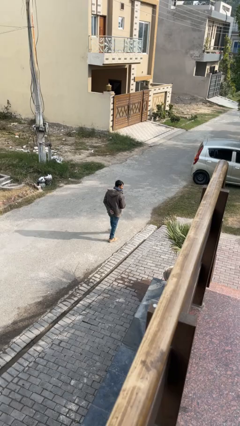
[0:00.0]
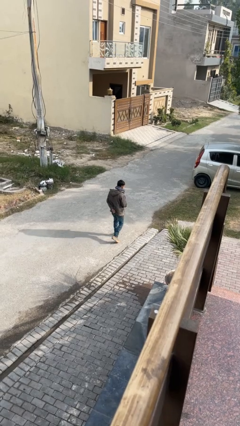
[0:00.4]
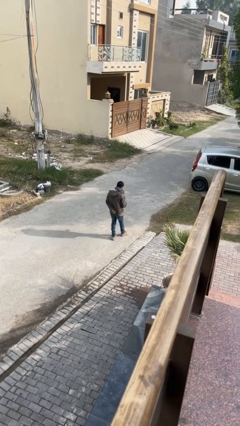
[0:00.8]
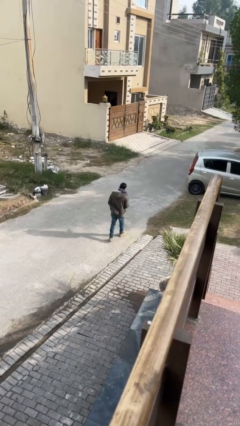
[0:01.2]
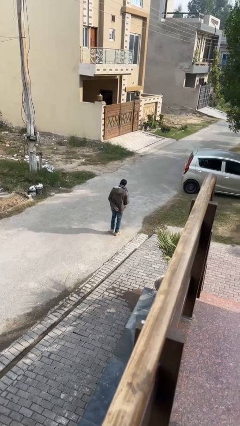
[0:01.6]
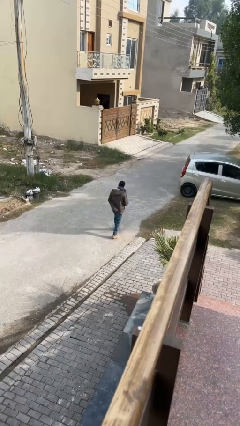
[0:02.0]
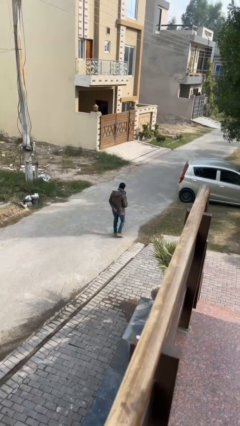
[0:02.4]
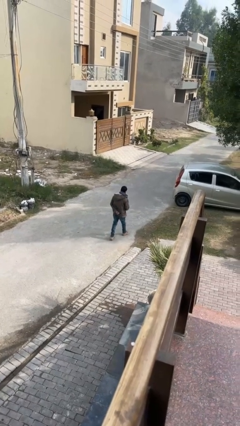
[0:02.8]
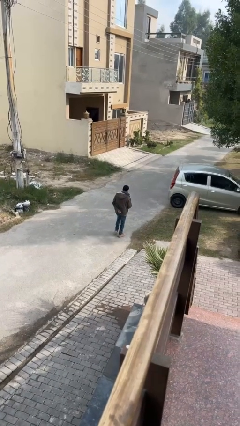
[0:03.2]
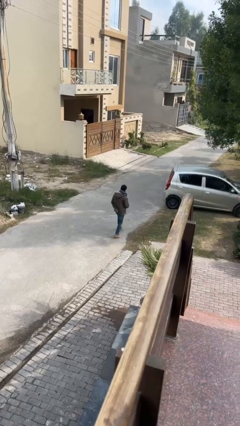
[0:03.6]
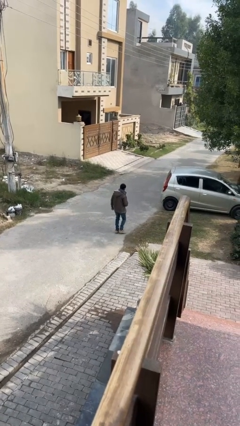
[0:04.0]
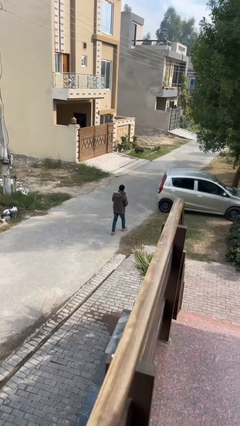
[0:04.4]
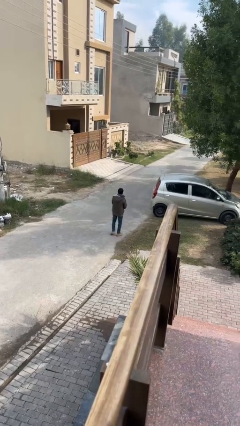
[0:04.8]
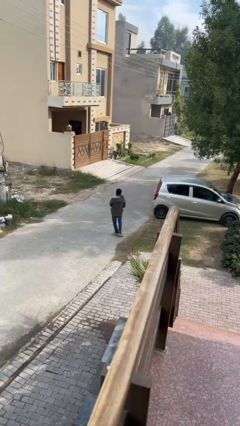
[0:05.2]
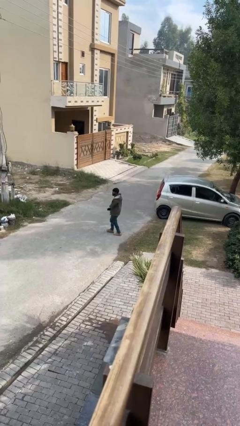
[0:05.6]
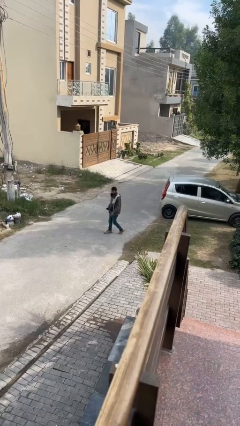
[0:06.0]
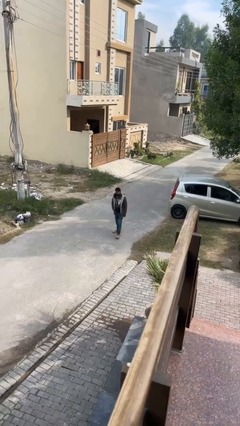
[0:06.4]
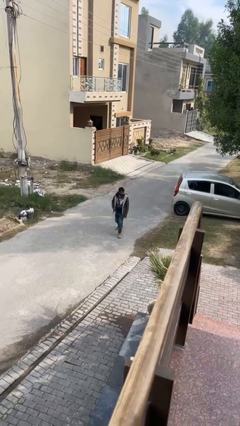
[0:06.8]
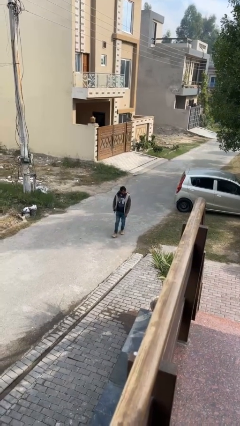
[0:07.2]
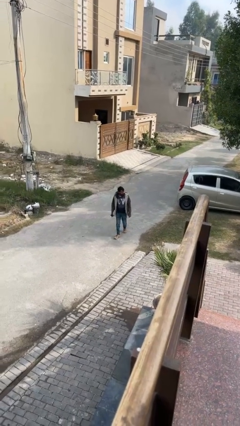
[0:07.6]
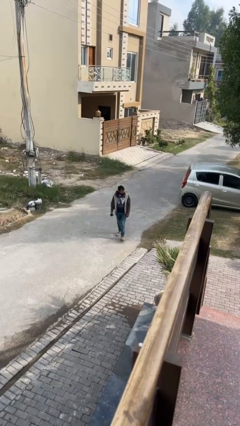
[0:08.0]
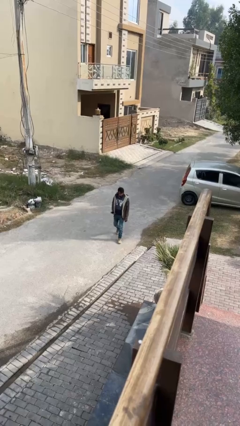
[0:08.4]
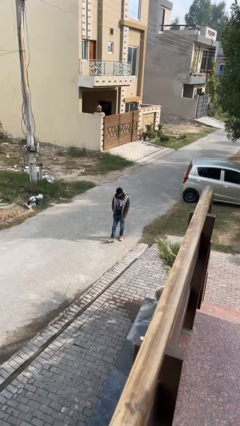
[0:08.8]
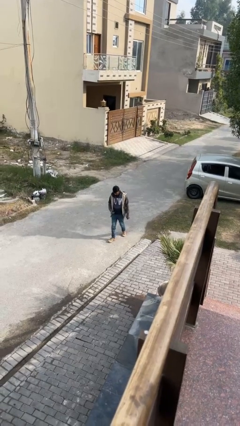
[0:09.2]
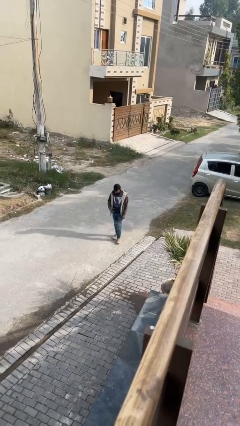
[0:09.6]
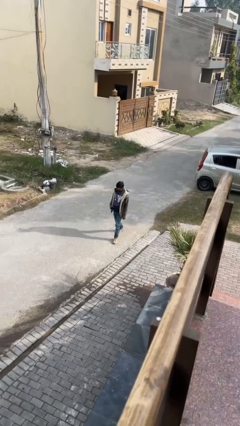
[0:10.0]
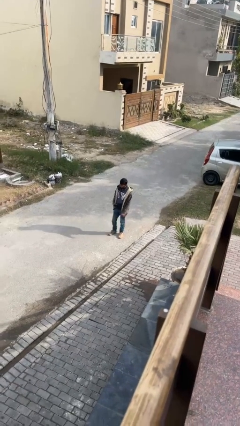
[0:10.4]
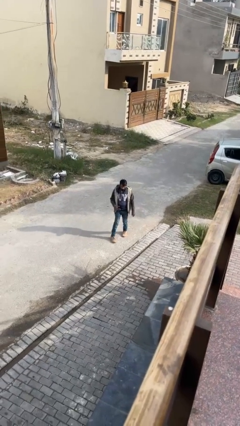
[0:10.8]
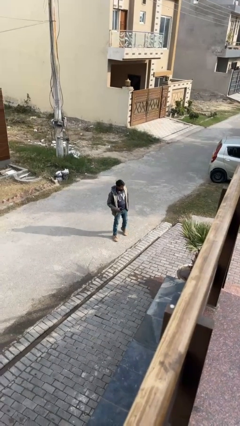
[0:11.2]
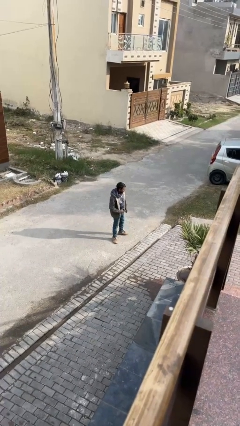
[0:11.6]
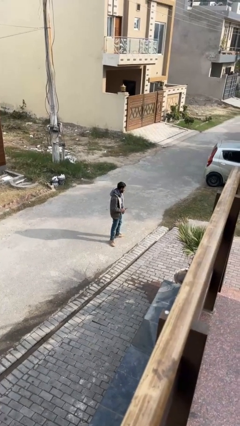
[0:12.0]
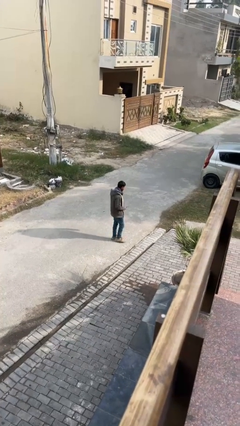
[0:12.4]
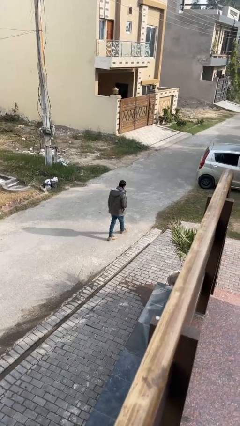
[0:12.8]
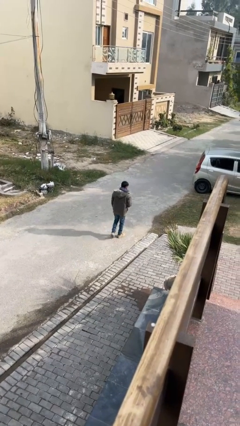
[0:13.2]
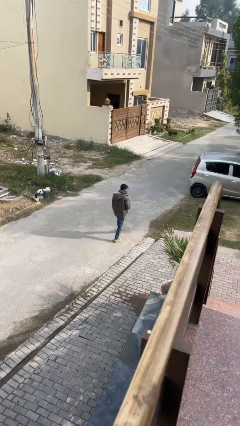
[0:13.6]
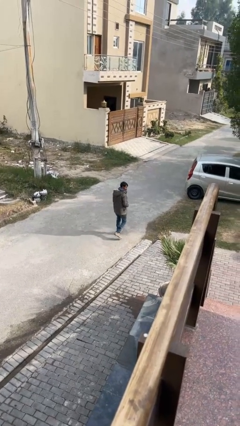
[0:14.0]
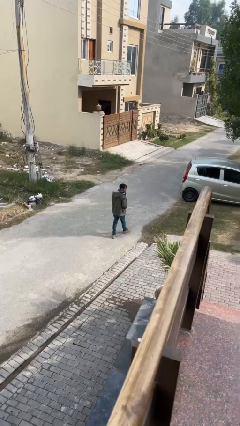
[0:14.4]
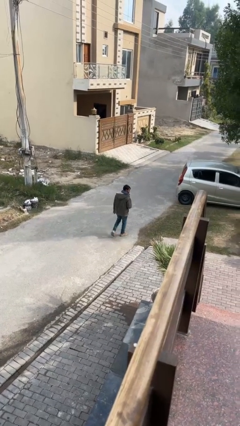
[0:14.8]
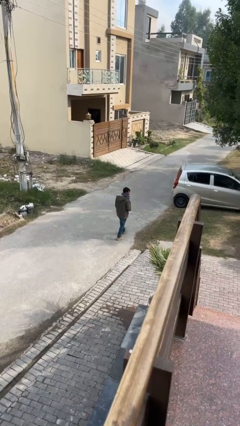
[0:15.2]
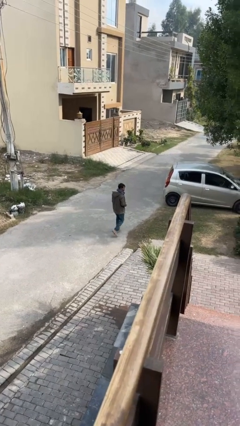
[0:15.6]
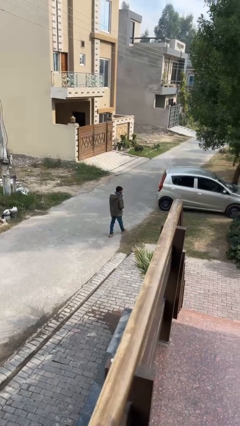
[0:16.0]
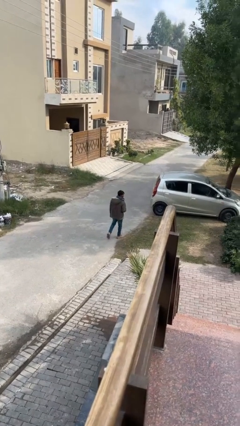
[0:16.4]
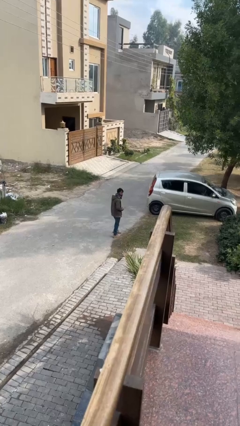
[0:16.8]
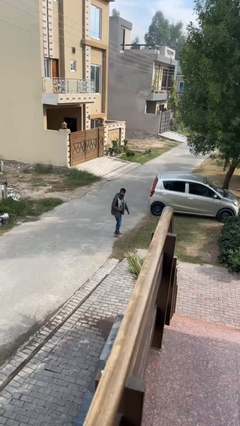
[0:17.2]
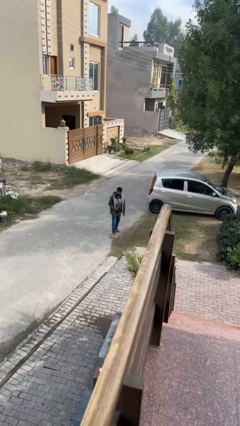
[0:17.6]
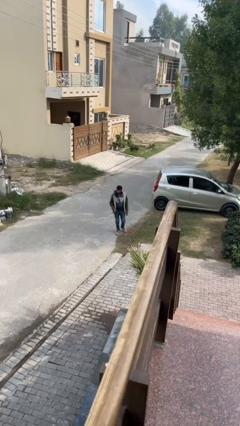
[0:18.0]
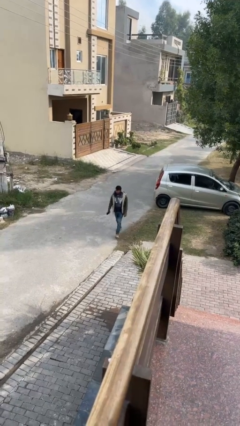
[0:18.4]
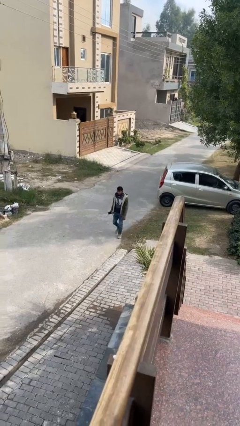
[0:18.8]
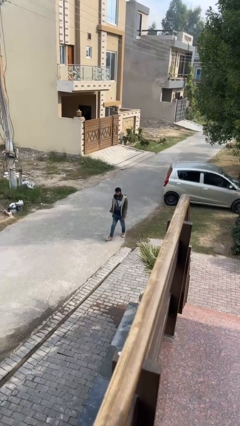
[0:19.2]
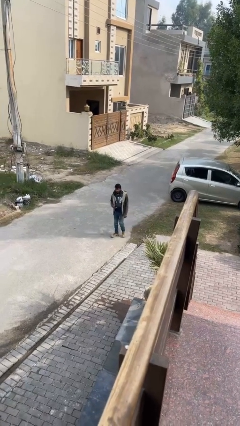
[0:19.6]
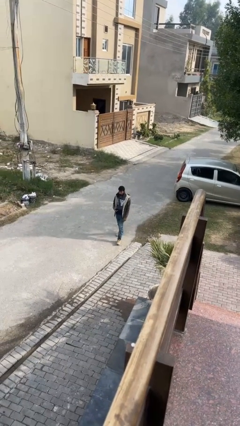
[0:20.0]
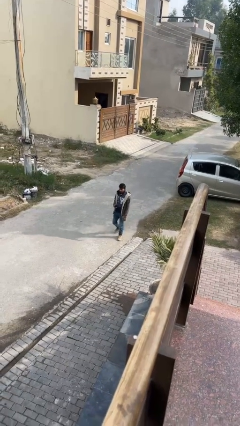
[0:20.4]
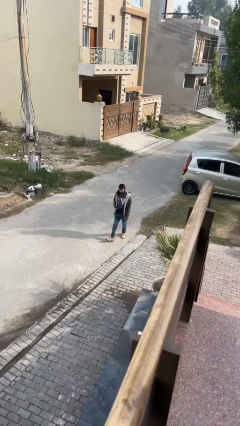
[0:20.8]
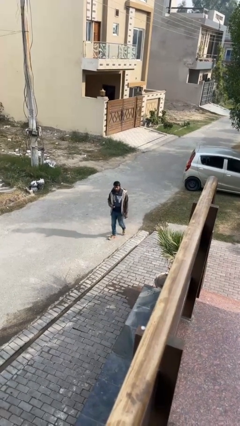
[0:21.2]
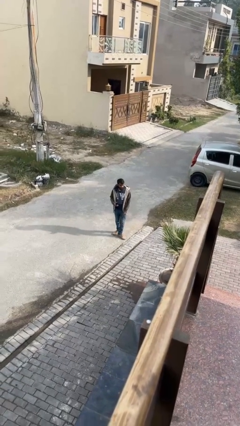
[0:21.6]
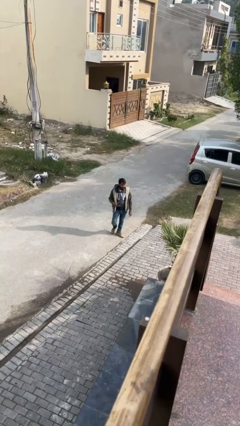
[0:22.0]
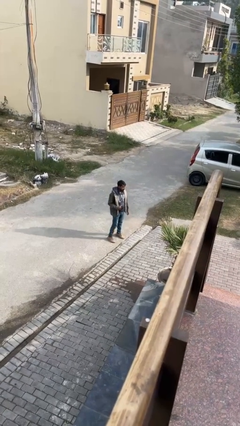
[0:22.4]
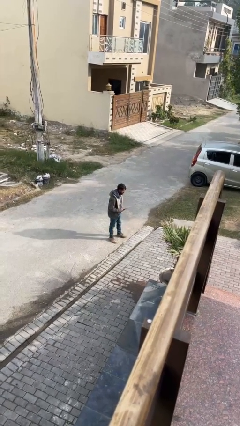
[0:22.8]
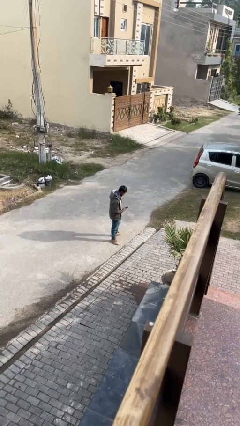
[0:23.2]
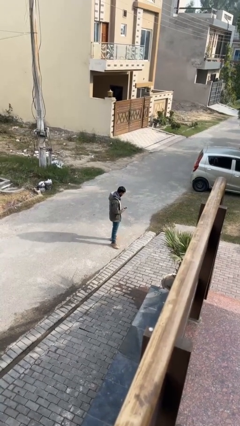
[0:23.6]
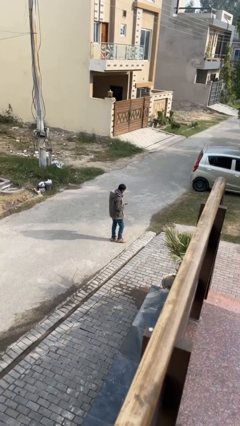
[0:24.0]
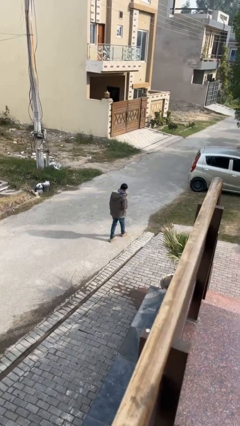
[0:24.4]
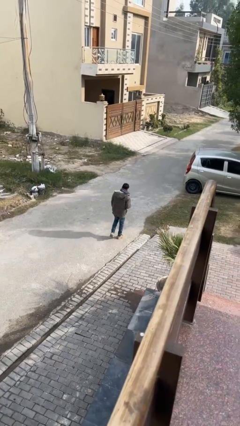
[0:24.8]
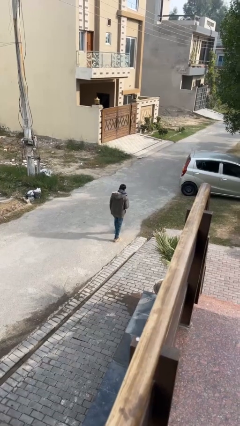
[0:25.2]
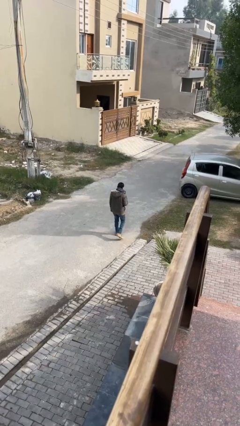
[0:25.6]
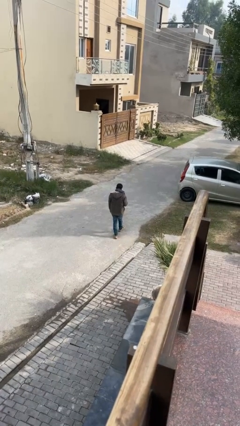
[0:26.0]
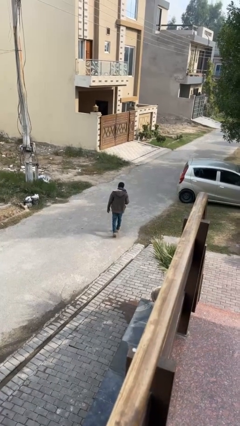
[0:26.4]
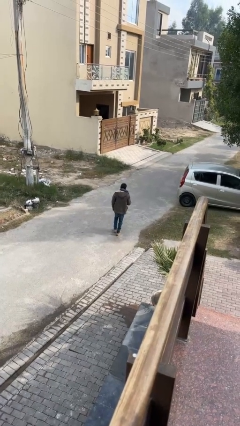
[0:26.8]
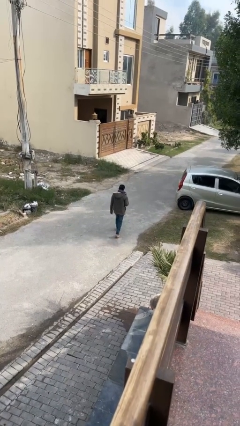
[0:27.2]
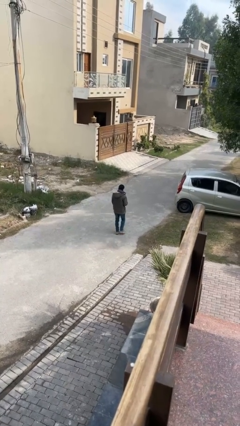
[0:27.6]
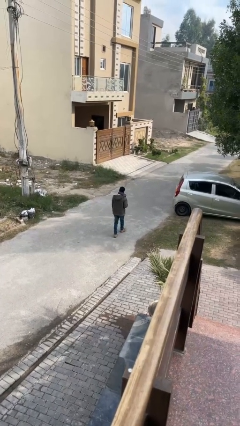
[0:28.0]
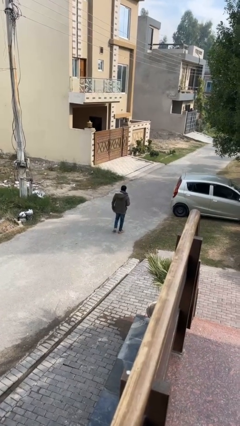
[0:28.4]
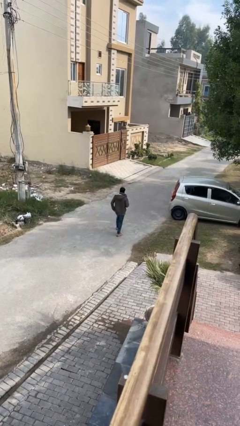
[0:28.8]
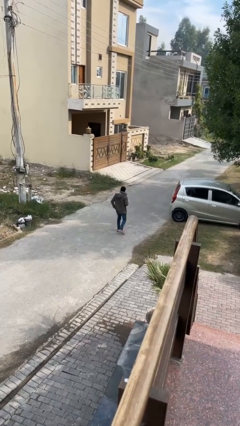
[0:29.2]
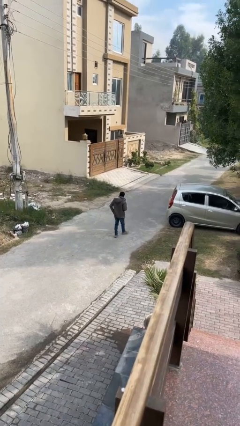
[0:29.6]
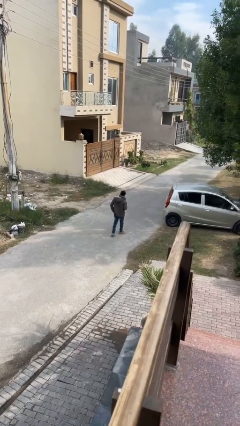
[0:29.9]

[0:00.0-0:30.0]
person walks

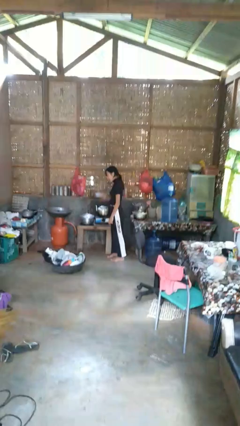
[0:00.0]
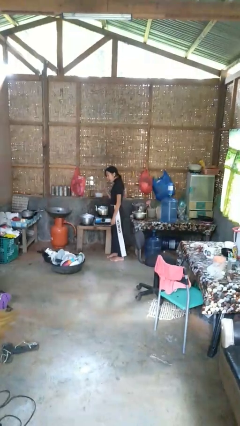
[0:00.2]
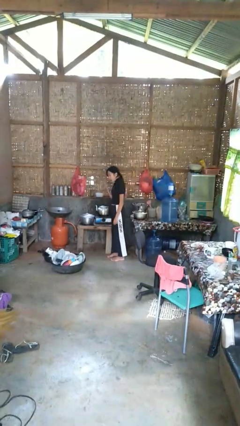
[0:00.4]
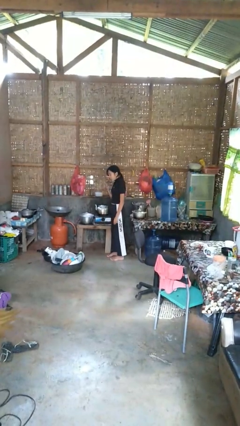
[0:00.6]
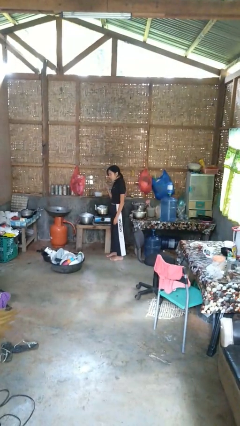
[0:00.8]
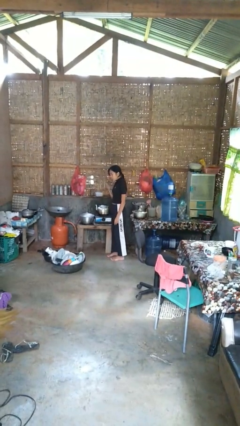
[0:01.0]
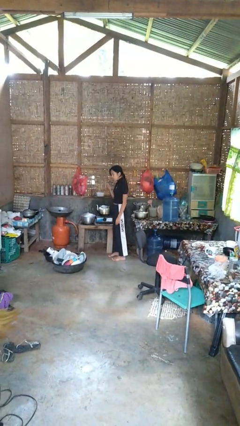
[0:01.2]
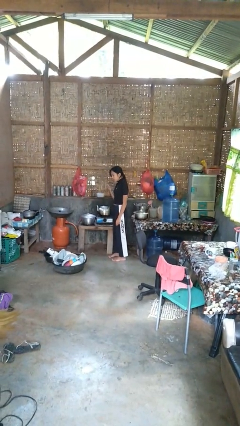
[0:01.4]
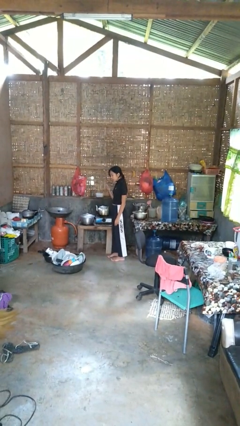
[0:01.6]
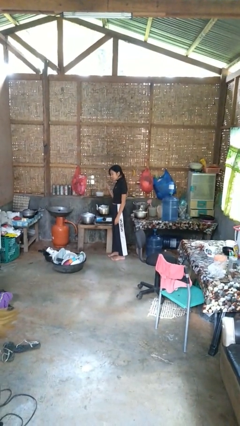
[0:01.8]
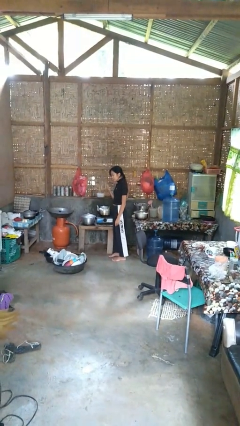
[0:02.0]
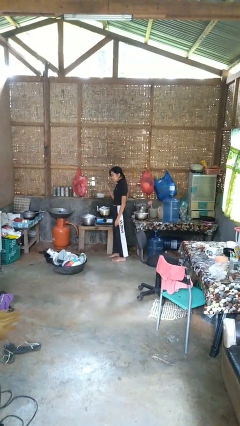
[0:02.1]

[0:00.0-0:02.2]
person burns hand

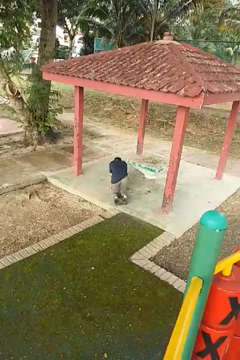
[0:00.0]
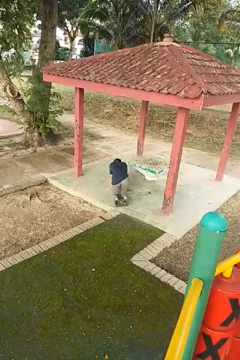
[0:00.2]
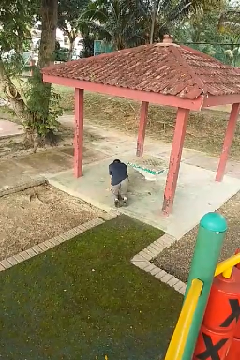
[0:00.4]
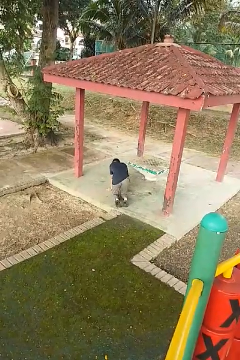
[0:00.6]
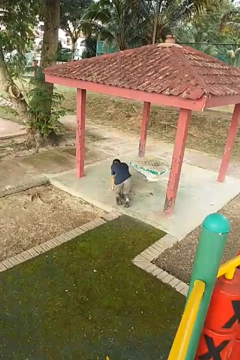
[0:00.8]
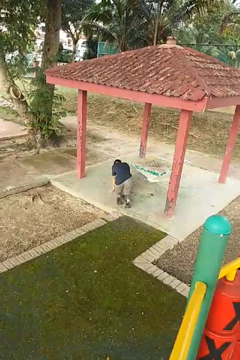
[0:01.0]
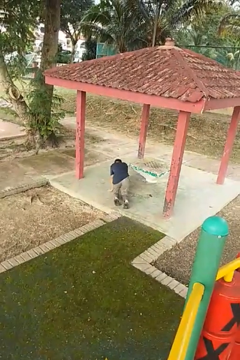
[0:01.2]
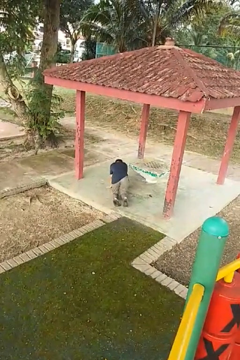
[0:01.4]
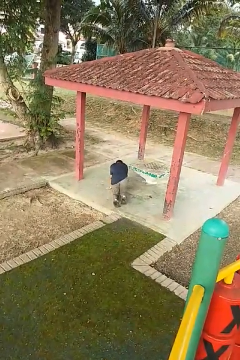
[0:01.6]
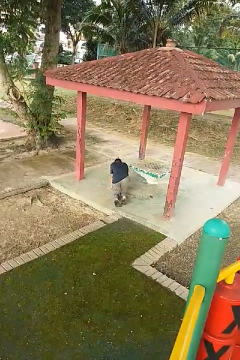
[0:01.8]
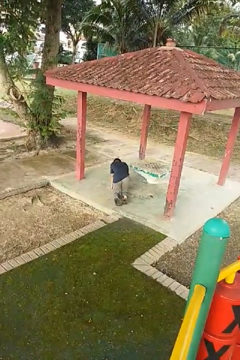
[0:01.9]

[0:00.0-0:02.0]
person crawls
